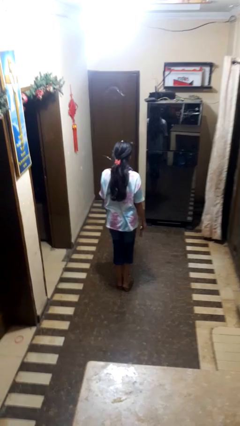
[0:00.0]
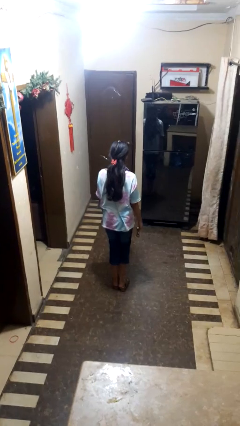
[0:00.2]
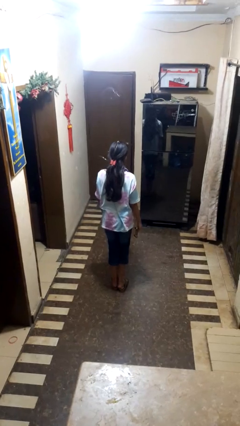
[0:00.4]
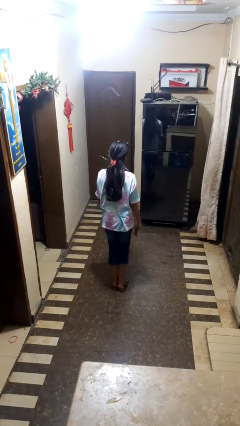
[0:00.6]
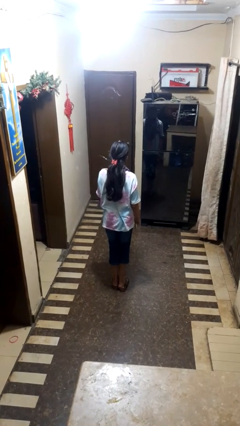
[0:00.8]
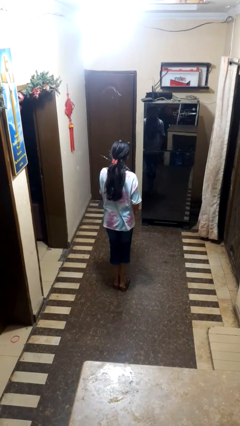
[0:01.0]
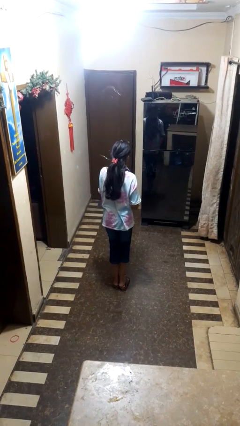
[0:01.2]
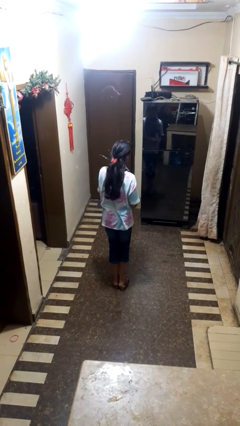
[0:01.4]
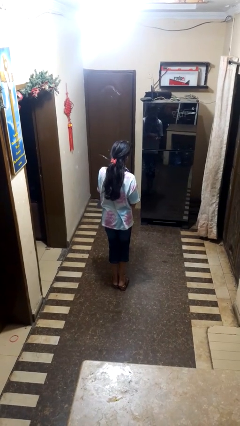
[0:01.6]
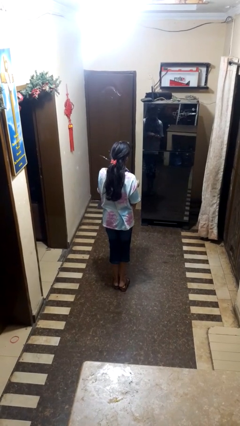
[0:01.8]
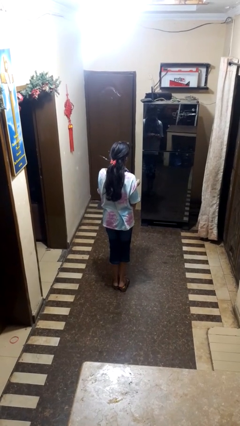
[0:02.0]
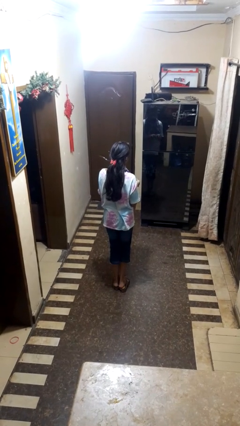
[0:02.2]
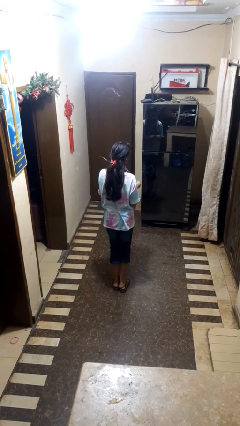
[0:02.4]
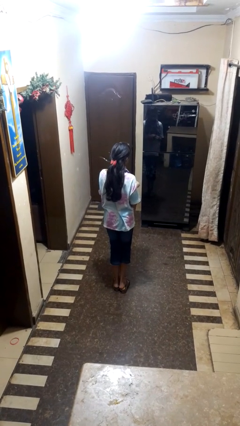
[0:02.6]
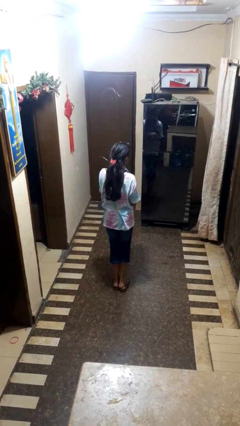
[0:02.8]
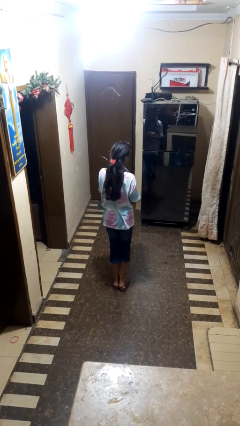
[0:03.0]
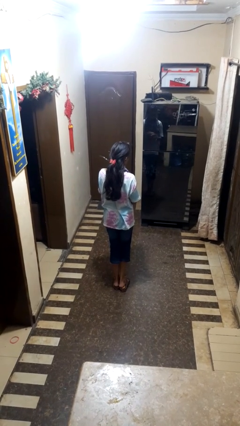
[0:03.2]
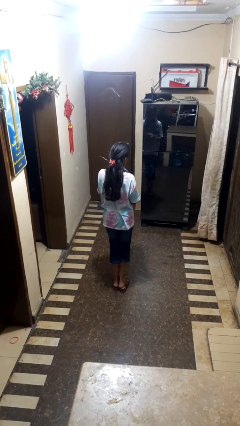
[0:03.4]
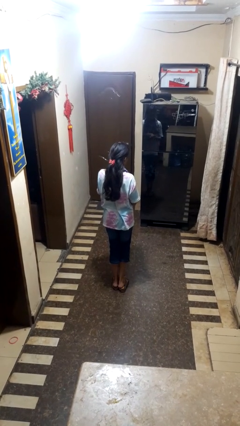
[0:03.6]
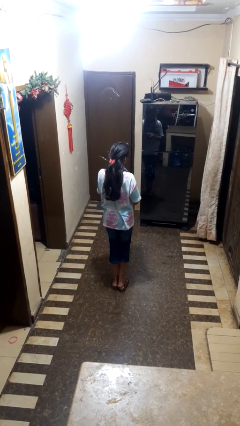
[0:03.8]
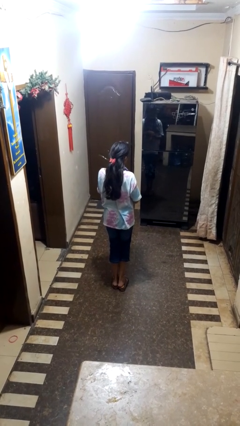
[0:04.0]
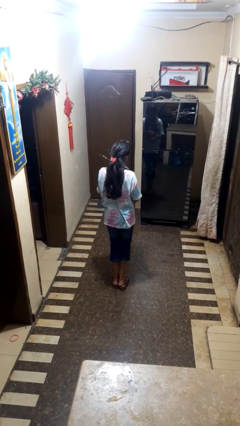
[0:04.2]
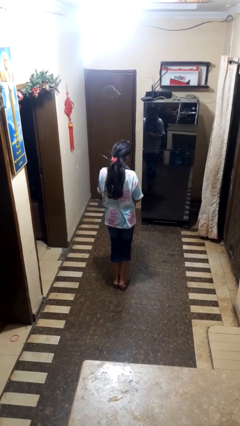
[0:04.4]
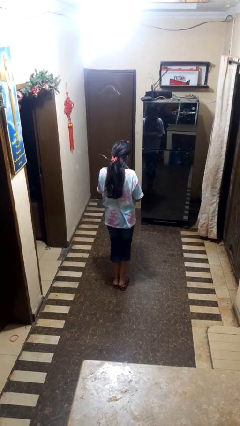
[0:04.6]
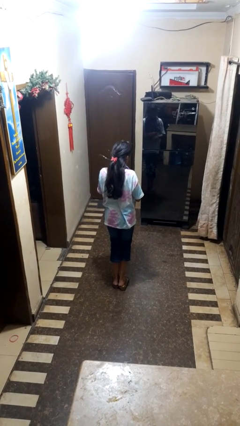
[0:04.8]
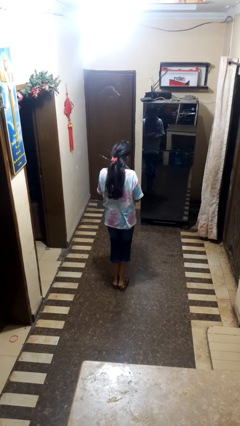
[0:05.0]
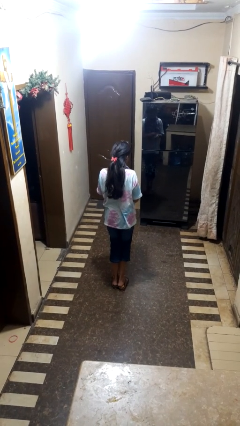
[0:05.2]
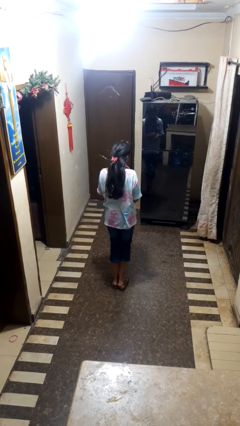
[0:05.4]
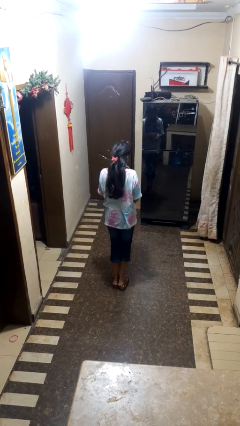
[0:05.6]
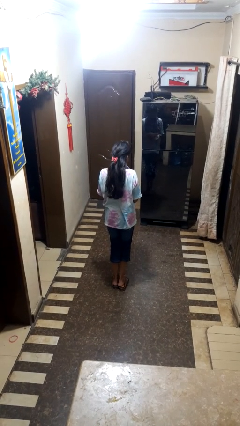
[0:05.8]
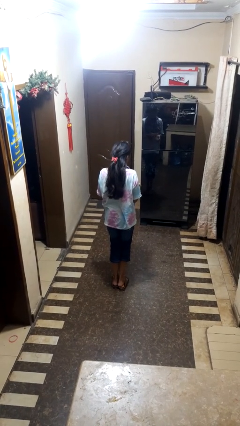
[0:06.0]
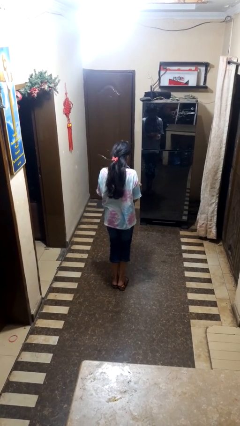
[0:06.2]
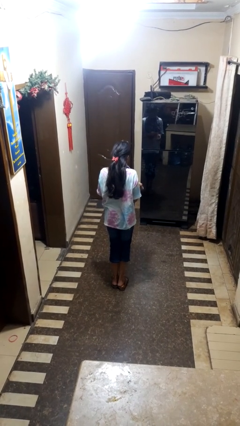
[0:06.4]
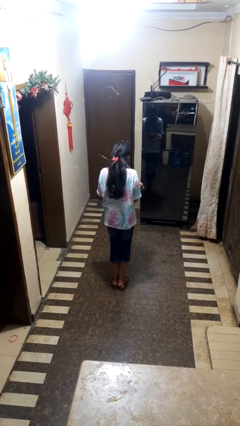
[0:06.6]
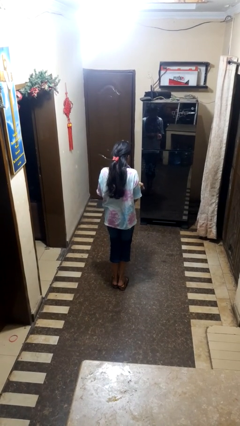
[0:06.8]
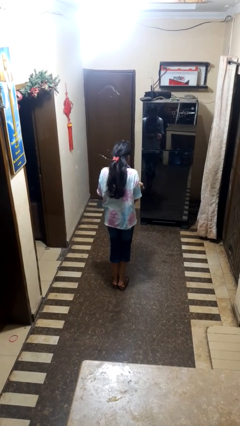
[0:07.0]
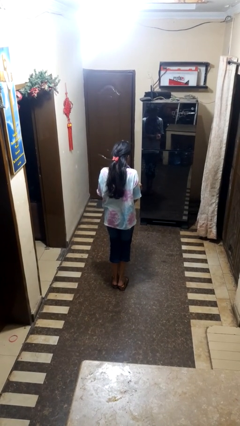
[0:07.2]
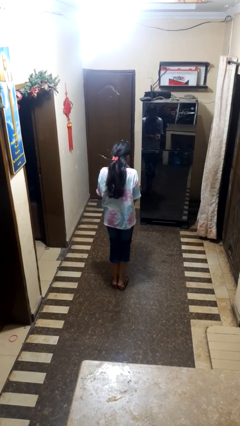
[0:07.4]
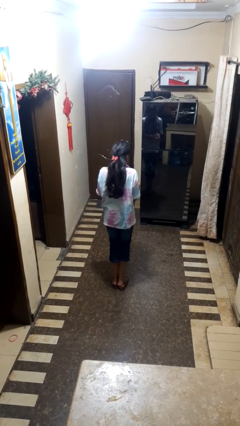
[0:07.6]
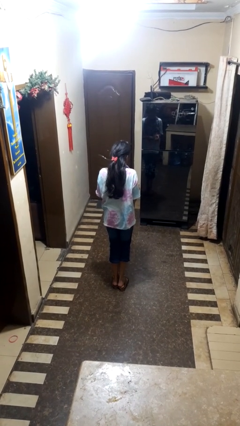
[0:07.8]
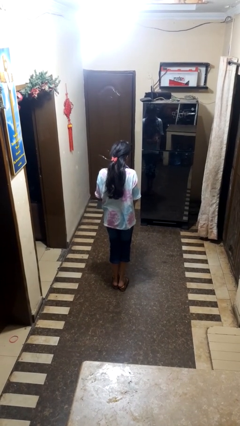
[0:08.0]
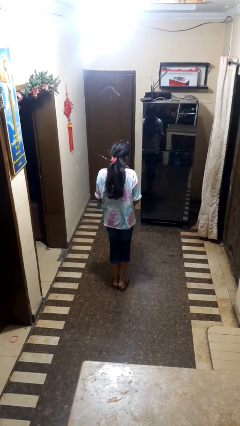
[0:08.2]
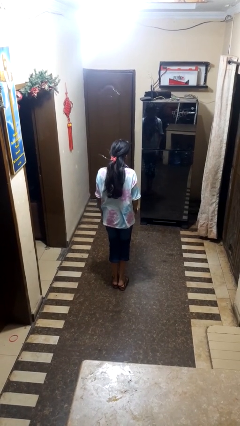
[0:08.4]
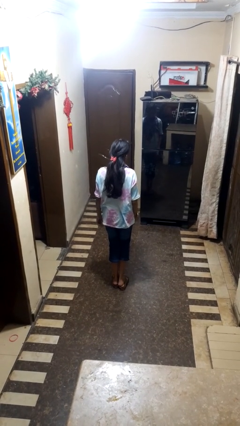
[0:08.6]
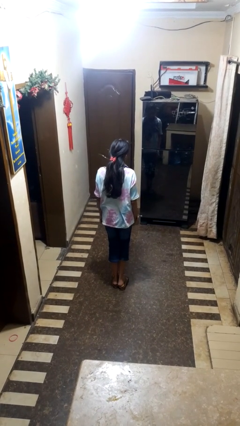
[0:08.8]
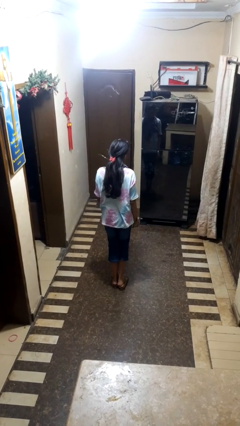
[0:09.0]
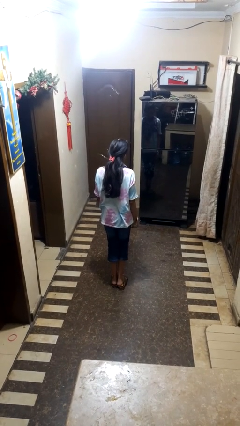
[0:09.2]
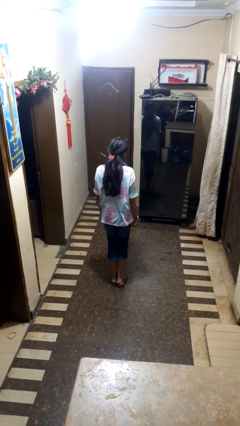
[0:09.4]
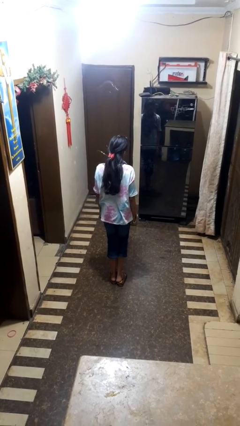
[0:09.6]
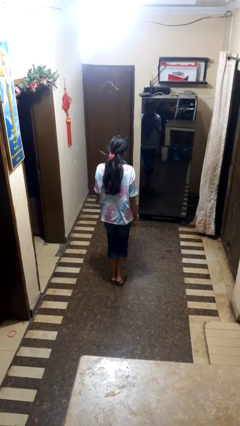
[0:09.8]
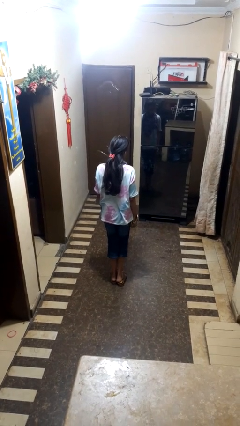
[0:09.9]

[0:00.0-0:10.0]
person puts on wristwatch

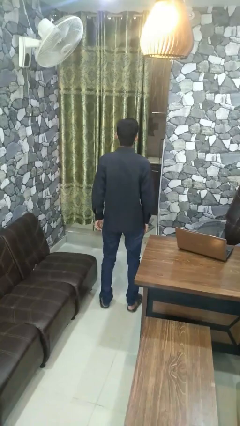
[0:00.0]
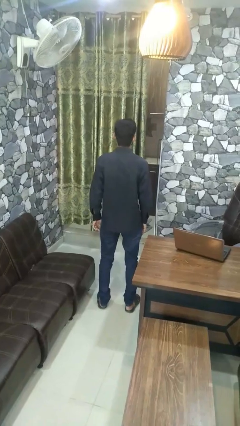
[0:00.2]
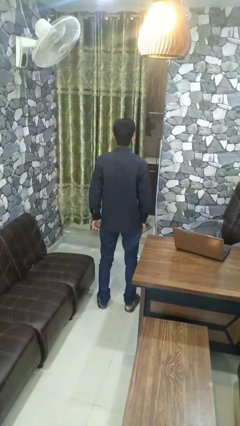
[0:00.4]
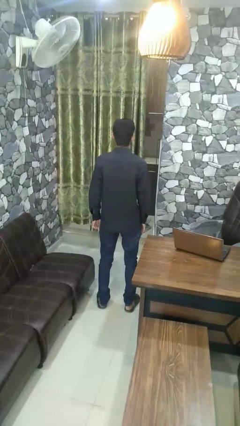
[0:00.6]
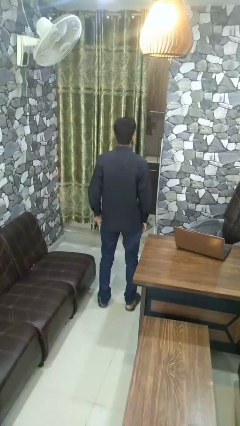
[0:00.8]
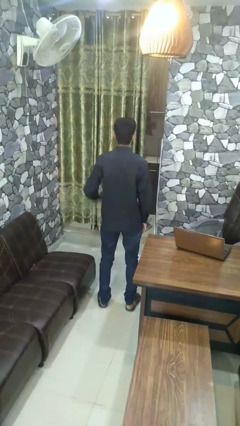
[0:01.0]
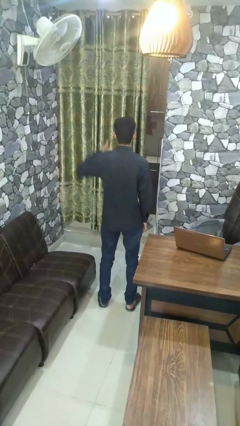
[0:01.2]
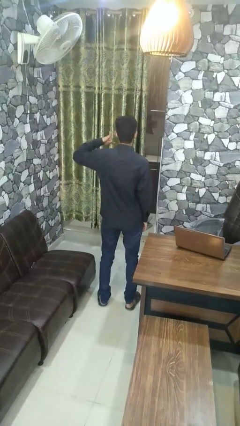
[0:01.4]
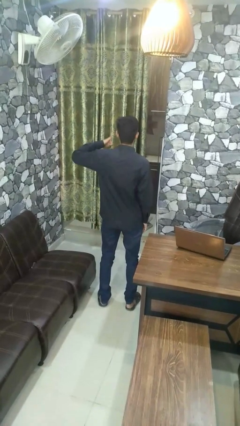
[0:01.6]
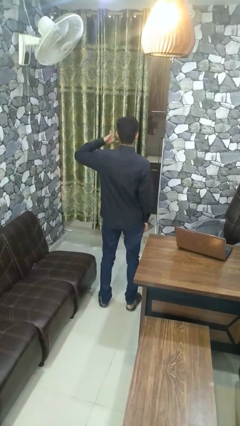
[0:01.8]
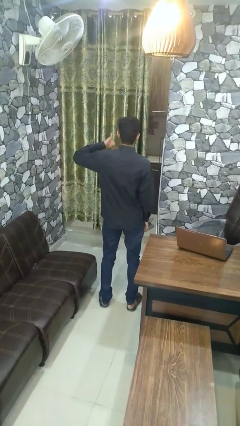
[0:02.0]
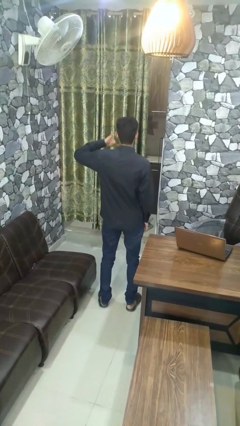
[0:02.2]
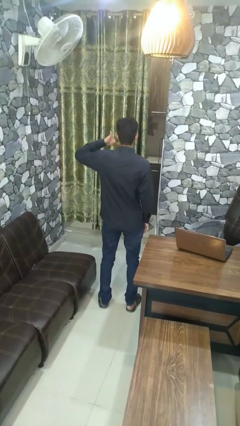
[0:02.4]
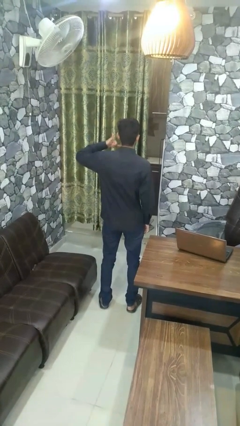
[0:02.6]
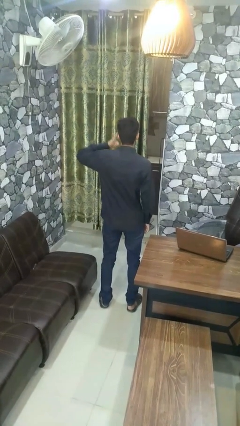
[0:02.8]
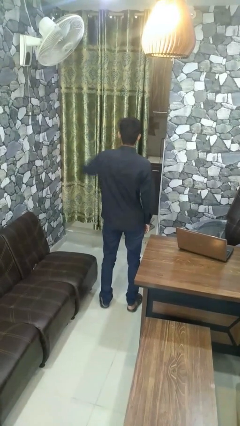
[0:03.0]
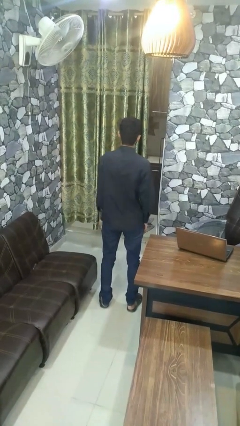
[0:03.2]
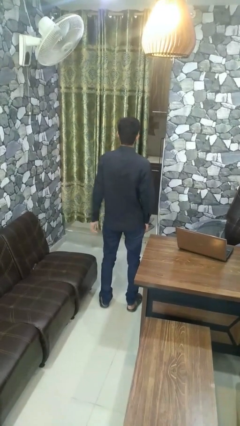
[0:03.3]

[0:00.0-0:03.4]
person gestures call me

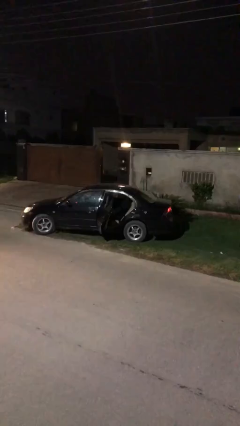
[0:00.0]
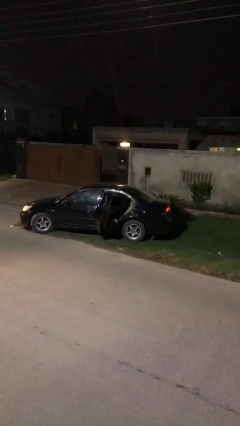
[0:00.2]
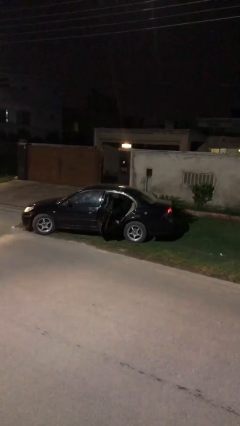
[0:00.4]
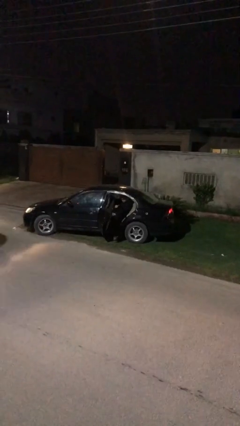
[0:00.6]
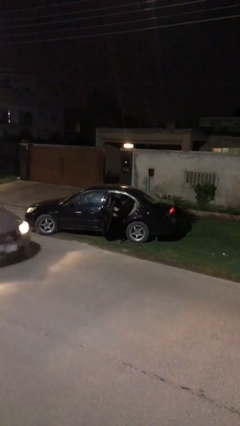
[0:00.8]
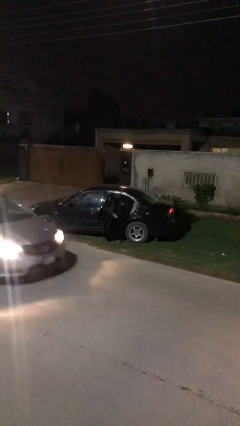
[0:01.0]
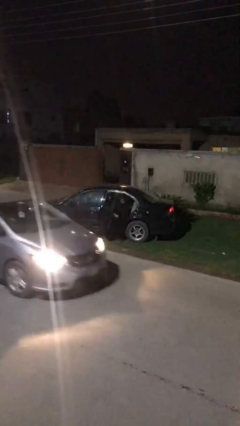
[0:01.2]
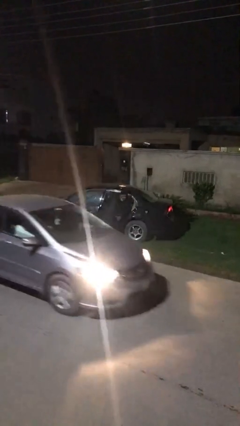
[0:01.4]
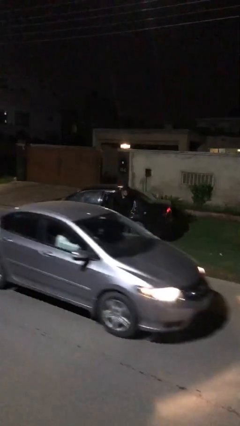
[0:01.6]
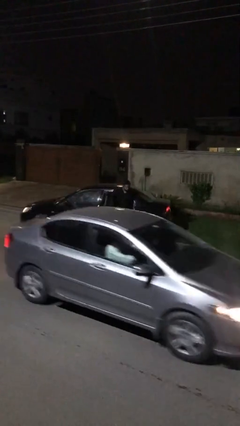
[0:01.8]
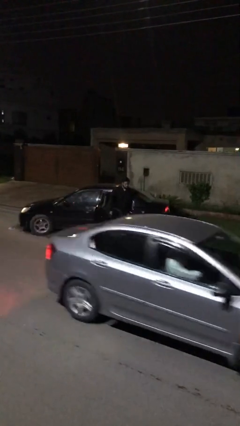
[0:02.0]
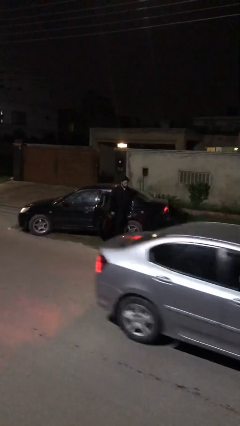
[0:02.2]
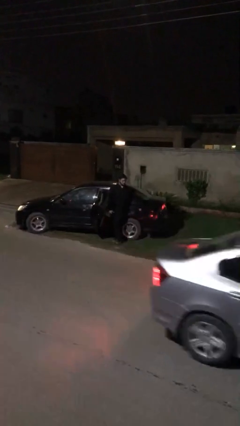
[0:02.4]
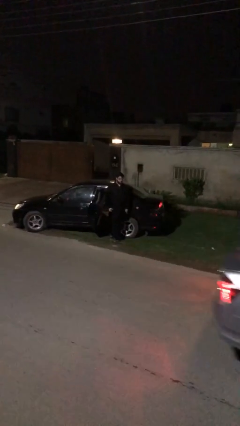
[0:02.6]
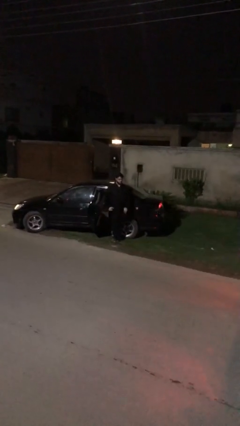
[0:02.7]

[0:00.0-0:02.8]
person exits car

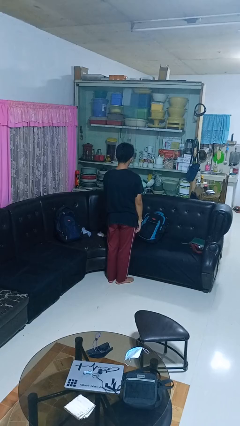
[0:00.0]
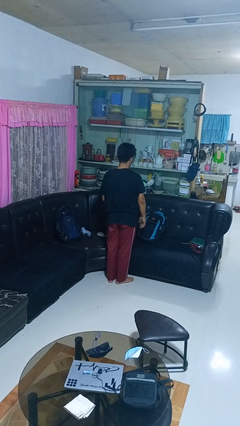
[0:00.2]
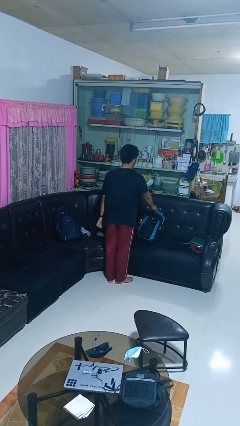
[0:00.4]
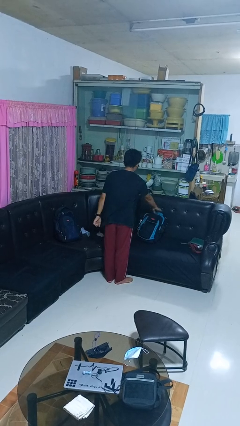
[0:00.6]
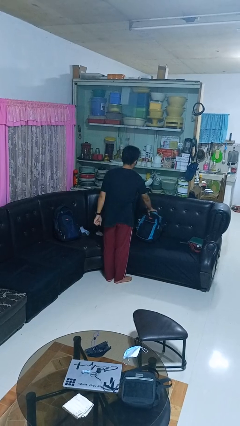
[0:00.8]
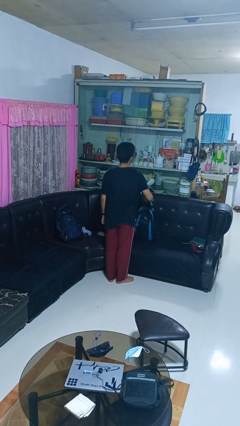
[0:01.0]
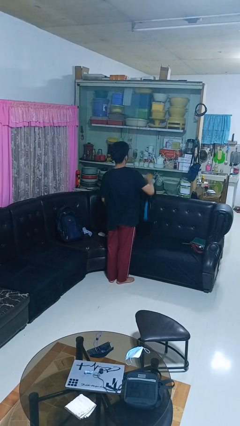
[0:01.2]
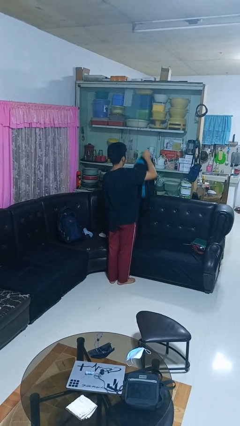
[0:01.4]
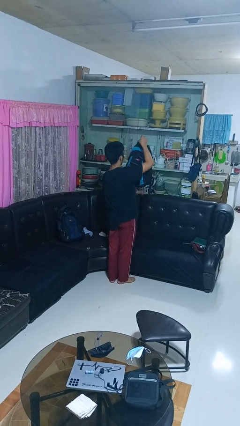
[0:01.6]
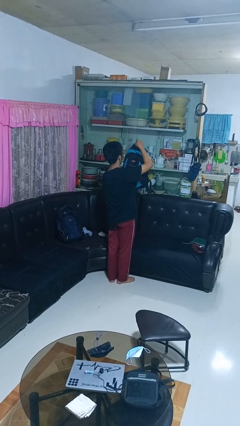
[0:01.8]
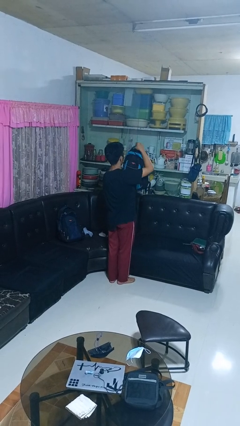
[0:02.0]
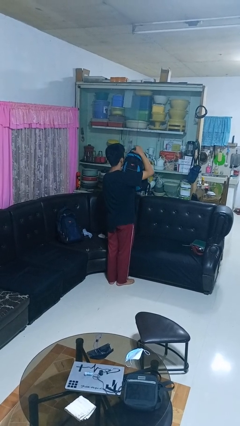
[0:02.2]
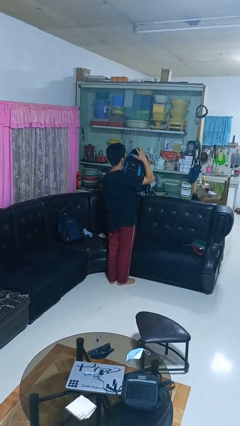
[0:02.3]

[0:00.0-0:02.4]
person picks up object from couch
